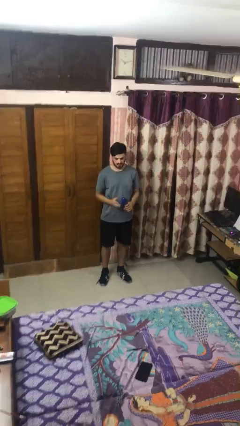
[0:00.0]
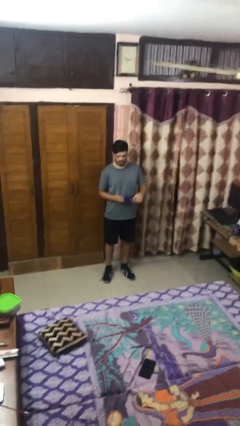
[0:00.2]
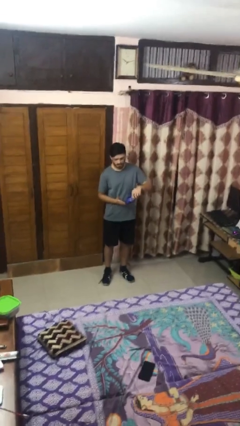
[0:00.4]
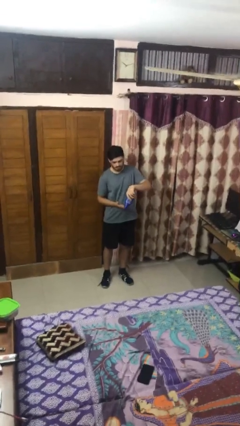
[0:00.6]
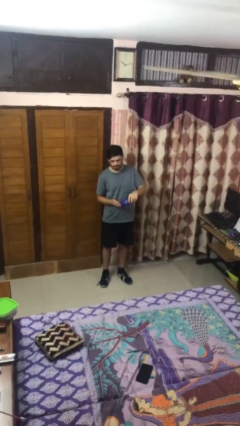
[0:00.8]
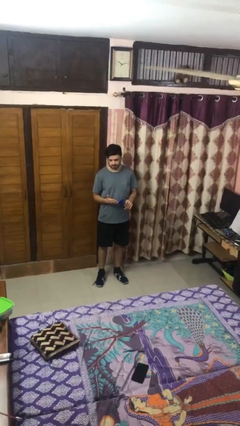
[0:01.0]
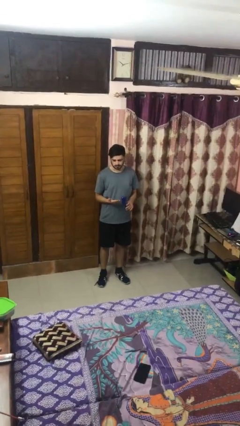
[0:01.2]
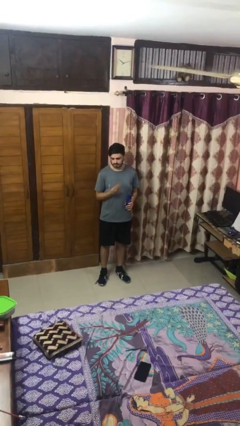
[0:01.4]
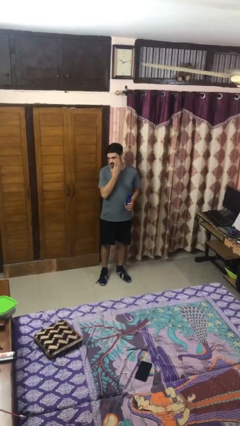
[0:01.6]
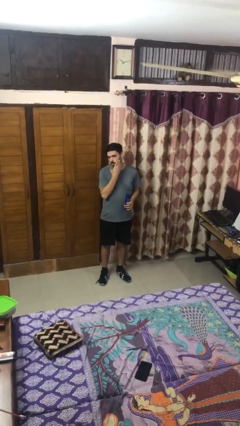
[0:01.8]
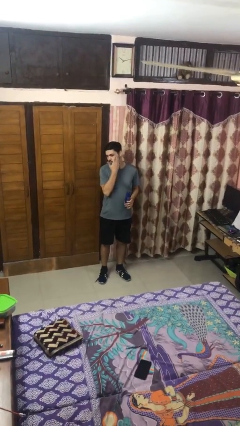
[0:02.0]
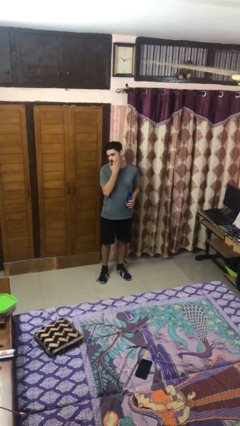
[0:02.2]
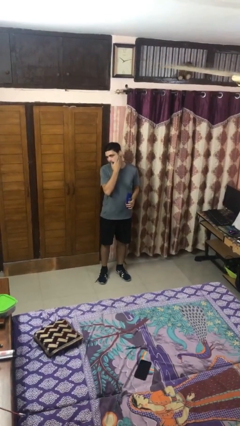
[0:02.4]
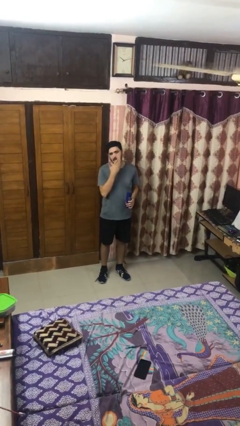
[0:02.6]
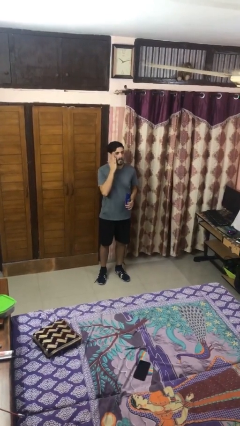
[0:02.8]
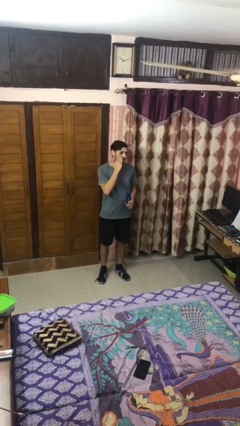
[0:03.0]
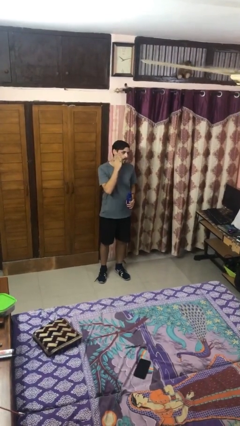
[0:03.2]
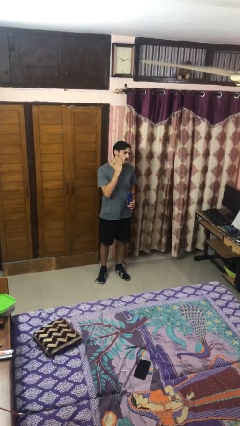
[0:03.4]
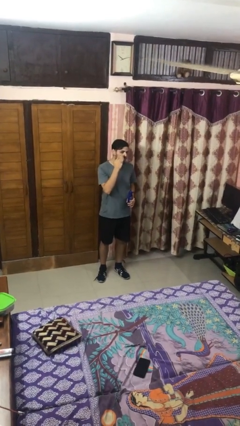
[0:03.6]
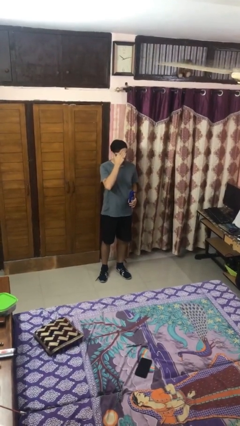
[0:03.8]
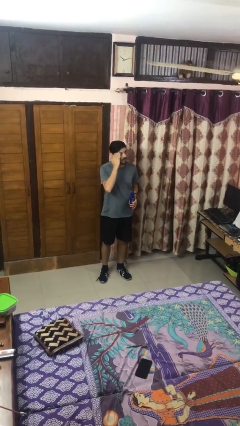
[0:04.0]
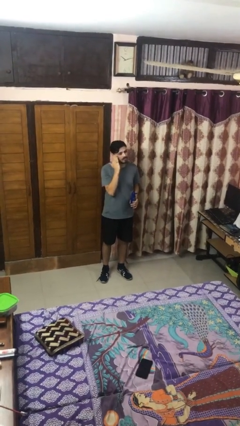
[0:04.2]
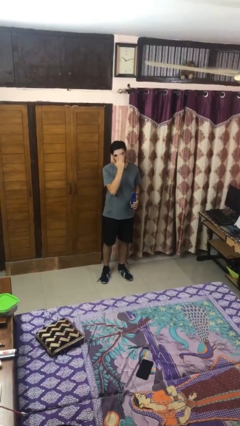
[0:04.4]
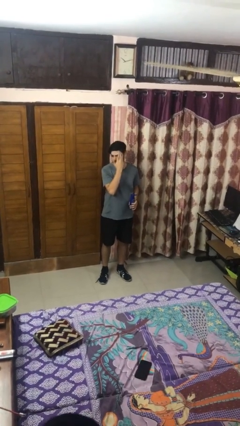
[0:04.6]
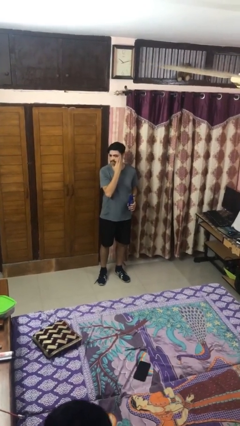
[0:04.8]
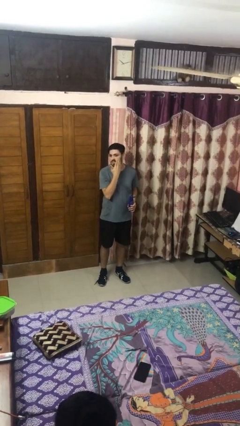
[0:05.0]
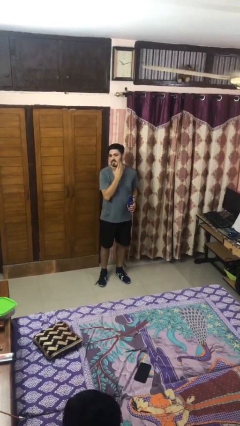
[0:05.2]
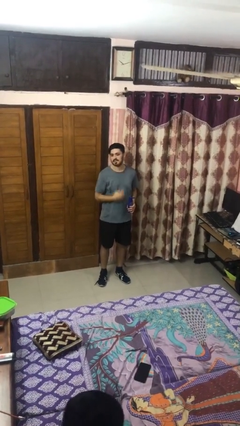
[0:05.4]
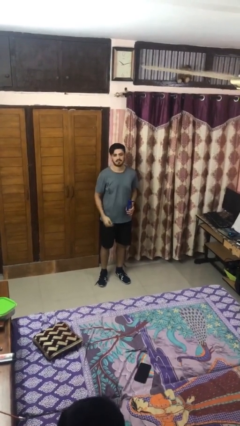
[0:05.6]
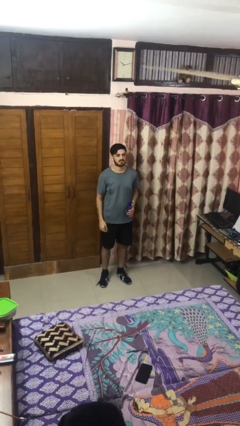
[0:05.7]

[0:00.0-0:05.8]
person applies facial moisturizer

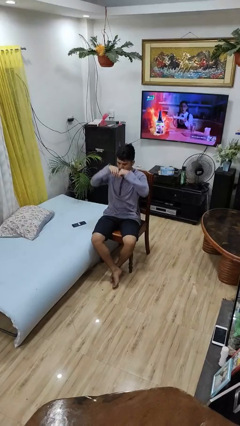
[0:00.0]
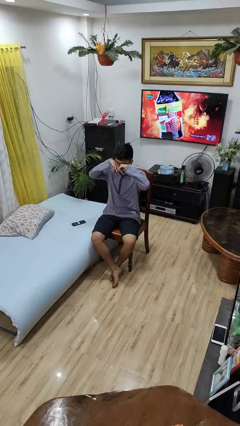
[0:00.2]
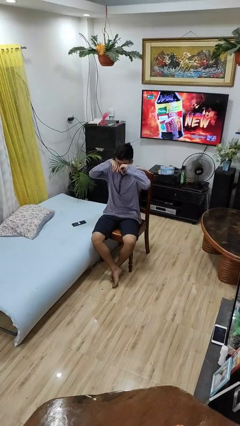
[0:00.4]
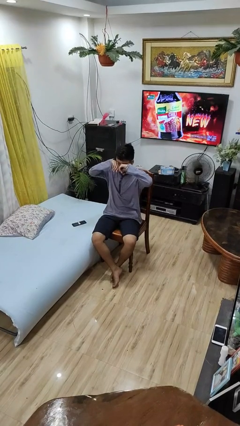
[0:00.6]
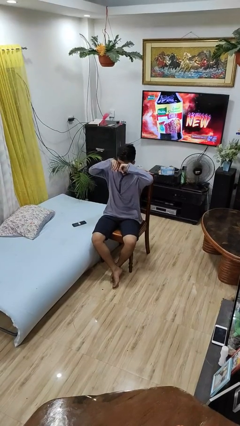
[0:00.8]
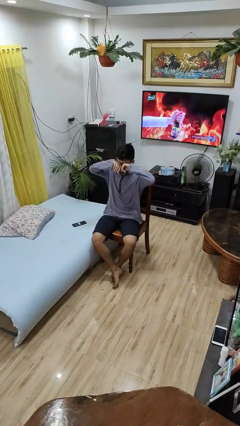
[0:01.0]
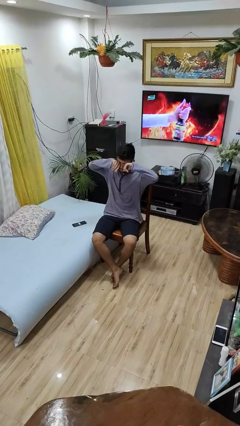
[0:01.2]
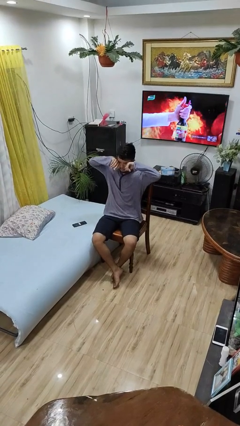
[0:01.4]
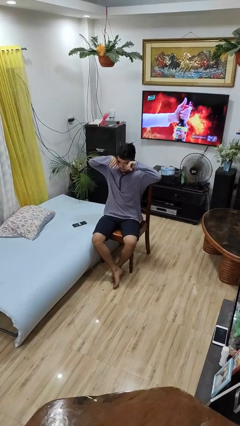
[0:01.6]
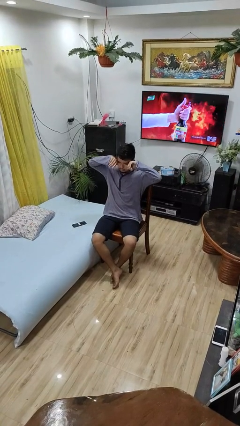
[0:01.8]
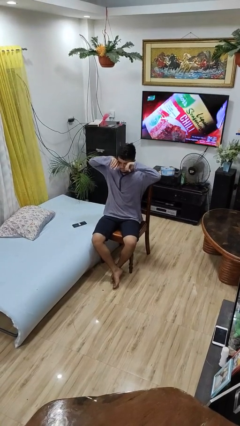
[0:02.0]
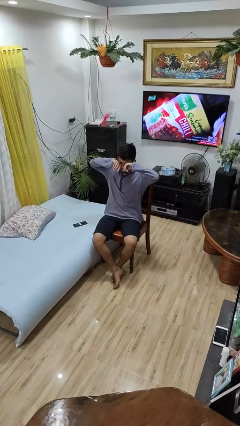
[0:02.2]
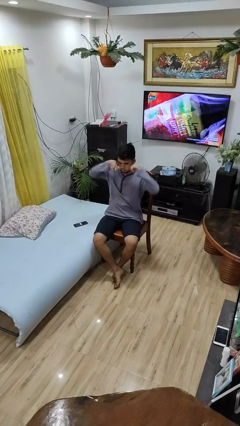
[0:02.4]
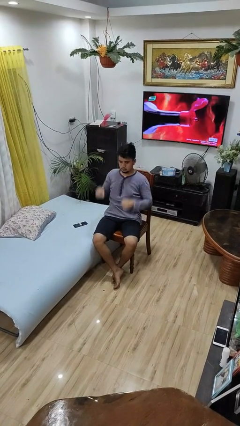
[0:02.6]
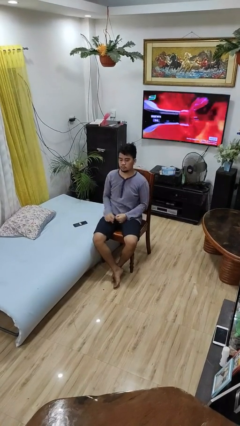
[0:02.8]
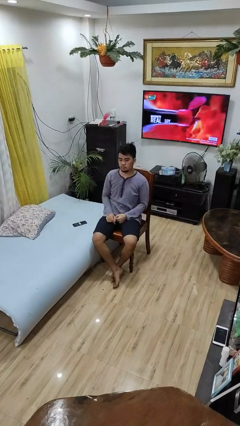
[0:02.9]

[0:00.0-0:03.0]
person rubs eyes

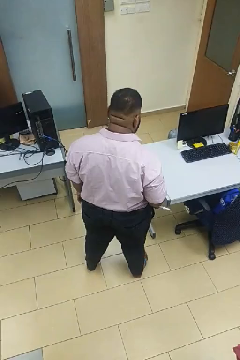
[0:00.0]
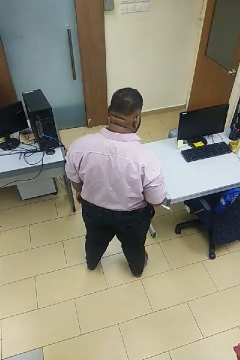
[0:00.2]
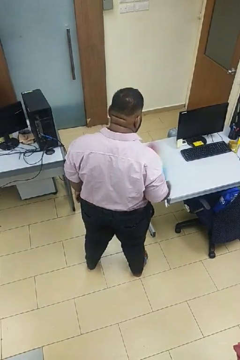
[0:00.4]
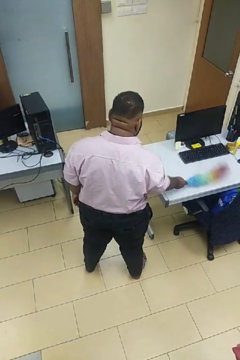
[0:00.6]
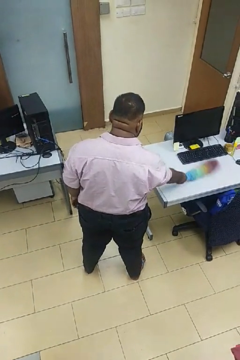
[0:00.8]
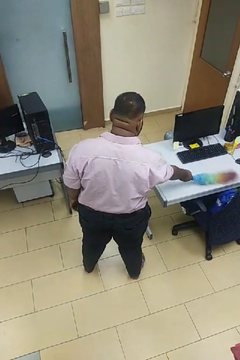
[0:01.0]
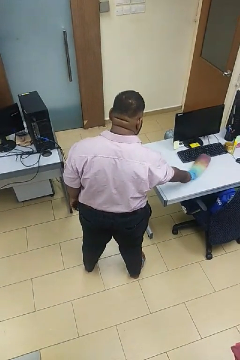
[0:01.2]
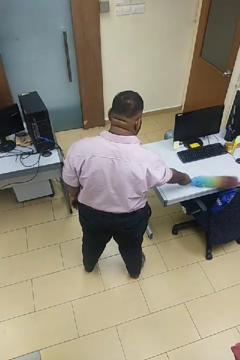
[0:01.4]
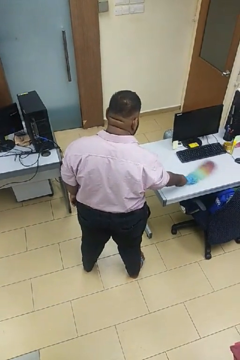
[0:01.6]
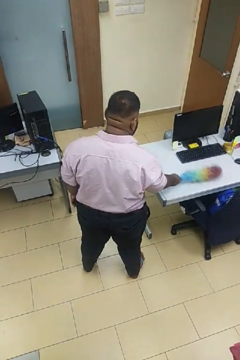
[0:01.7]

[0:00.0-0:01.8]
person dusts furniture

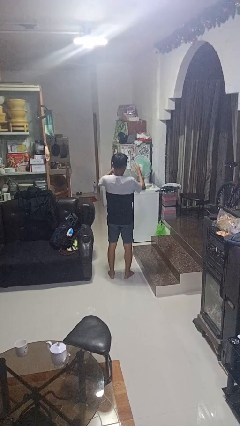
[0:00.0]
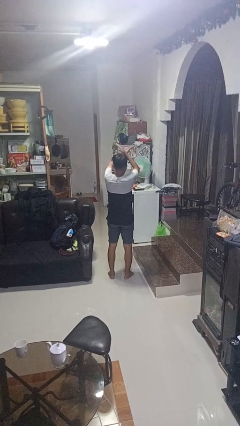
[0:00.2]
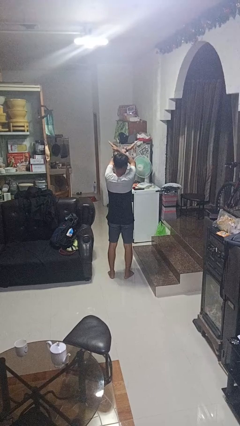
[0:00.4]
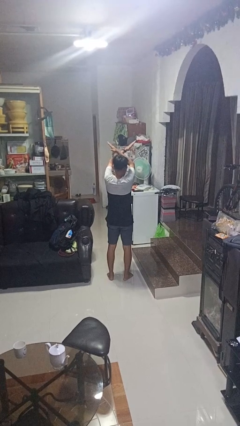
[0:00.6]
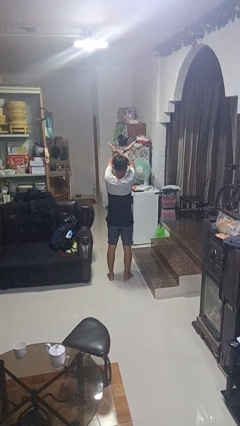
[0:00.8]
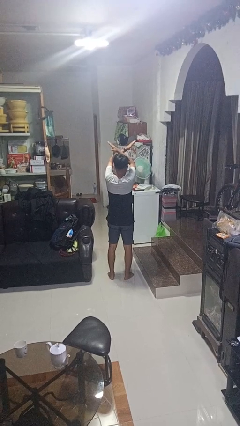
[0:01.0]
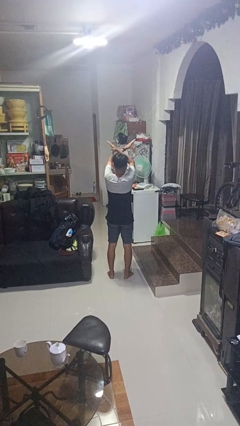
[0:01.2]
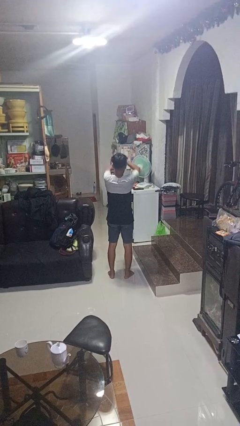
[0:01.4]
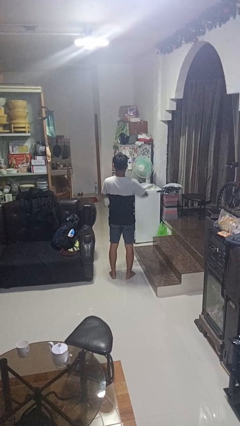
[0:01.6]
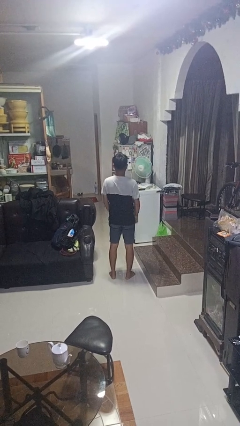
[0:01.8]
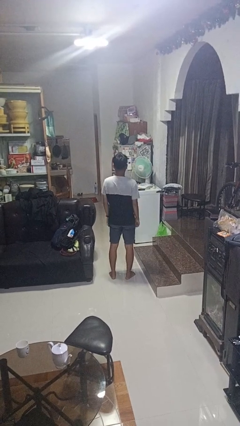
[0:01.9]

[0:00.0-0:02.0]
person gestures arms x

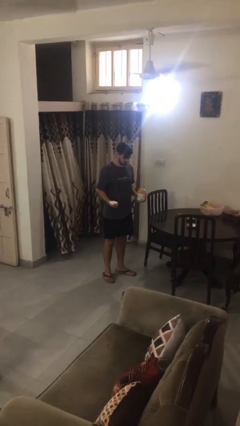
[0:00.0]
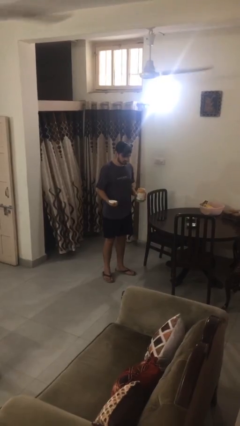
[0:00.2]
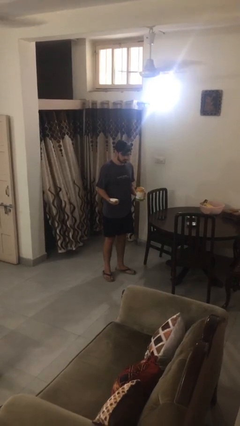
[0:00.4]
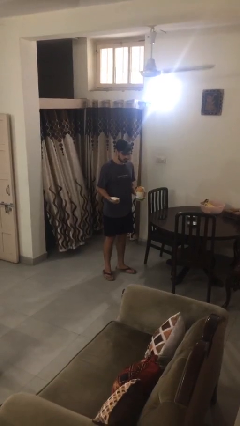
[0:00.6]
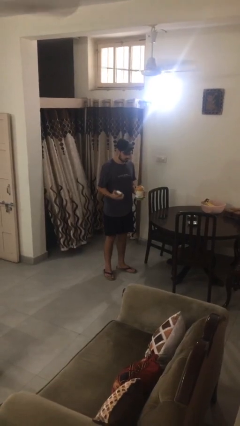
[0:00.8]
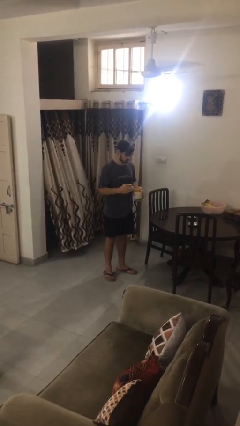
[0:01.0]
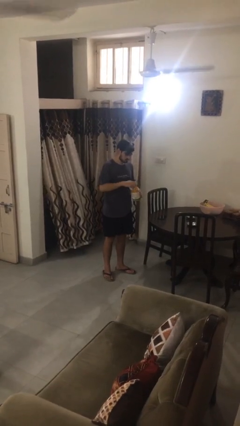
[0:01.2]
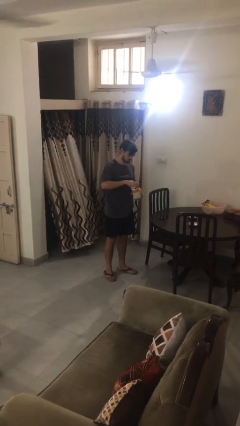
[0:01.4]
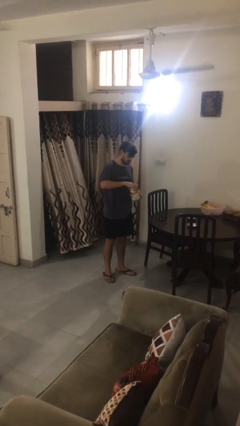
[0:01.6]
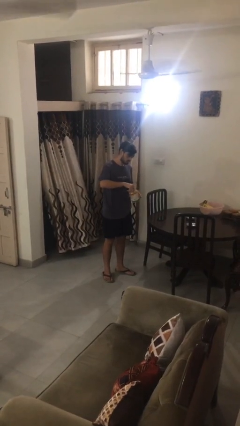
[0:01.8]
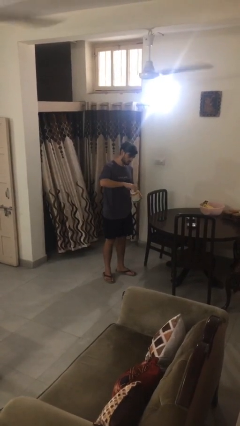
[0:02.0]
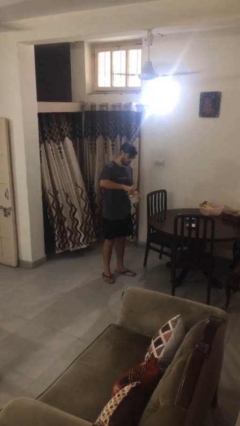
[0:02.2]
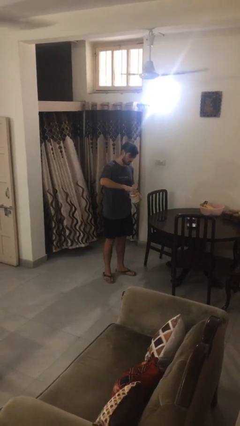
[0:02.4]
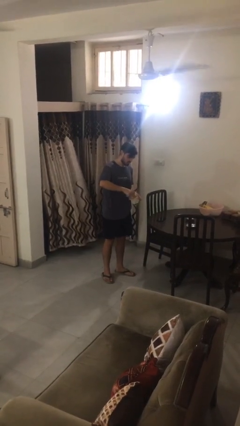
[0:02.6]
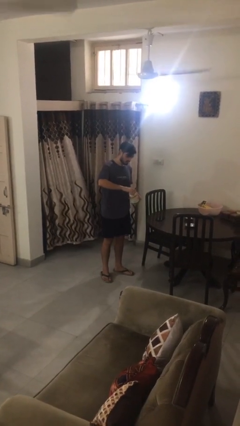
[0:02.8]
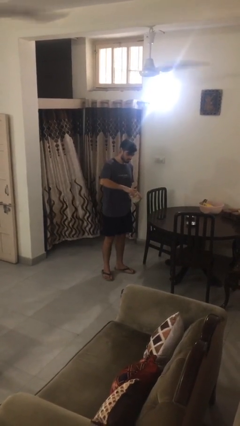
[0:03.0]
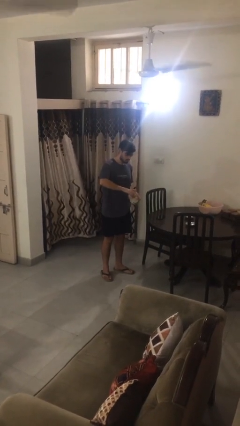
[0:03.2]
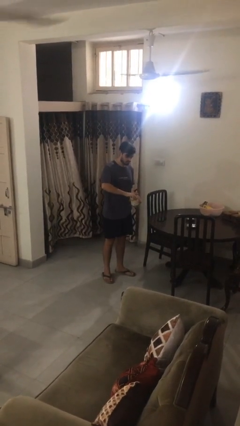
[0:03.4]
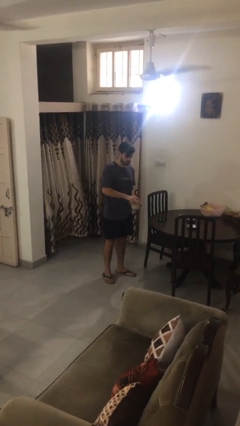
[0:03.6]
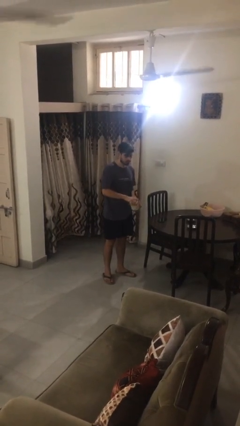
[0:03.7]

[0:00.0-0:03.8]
person closes jar

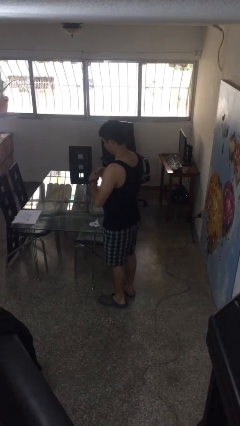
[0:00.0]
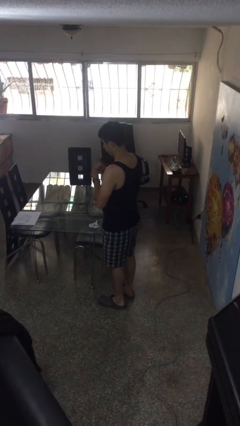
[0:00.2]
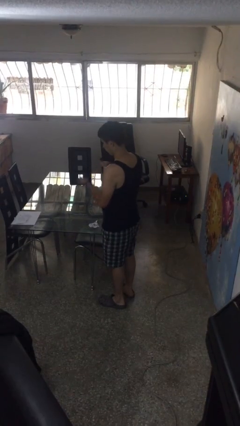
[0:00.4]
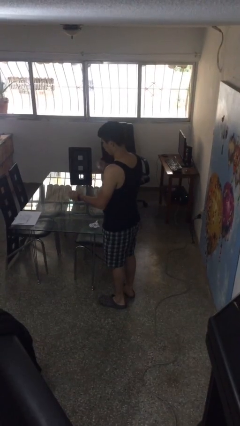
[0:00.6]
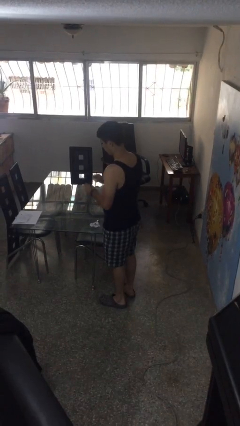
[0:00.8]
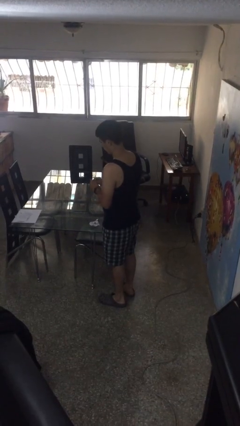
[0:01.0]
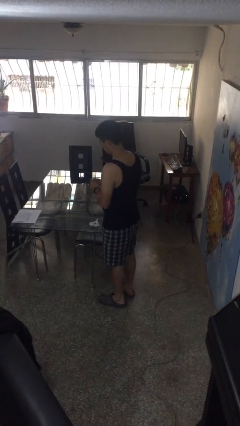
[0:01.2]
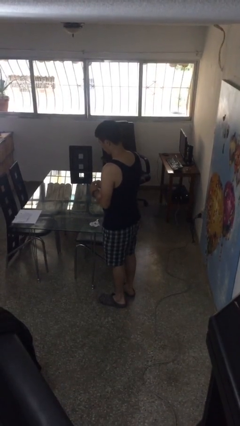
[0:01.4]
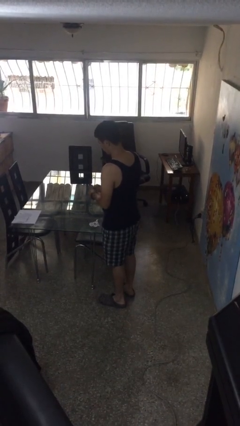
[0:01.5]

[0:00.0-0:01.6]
person tears paper
